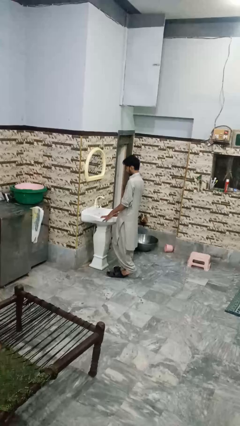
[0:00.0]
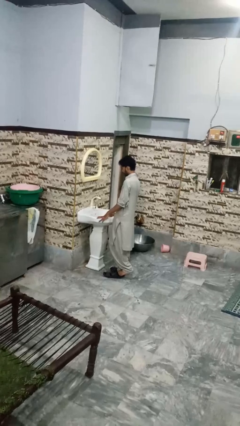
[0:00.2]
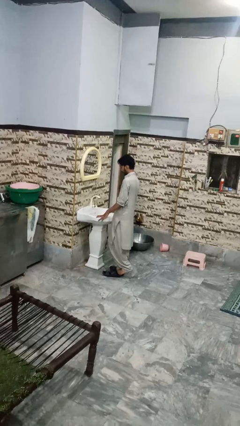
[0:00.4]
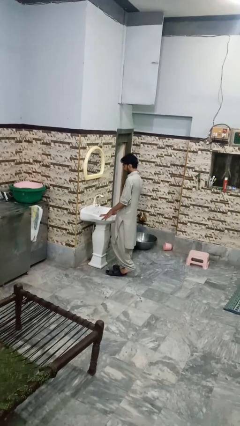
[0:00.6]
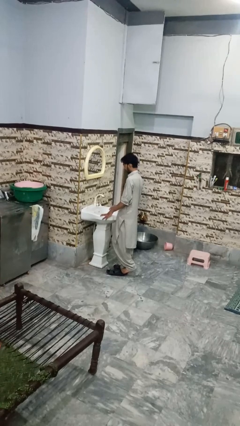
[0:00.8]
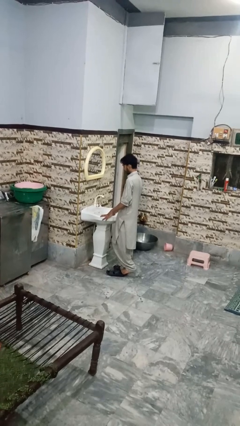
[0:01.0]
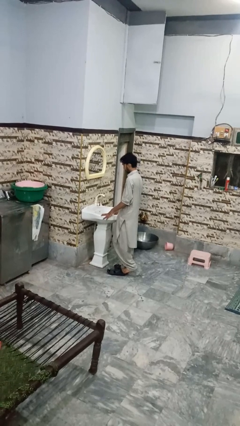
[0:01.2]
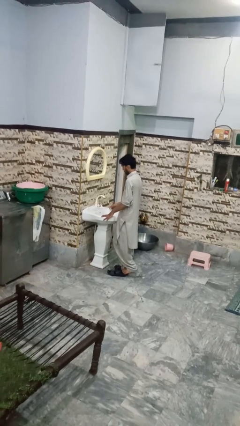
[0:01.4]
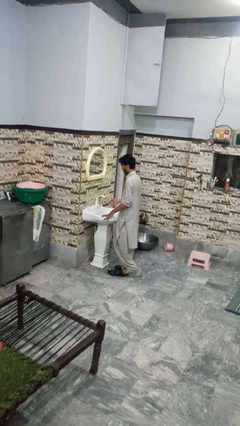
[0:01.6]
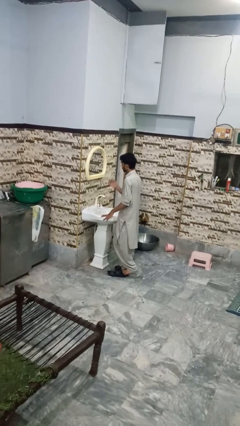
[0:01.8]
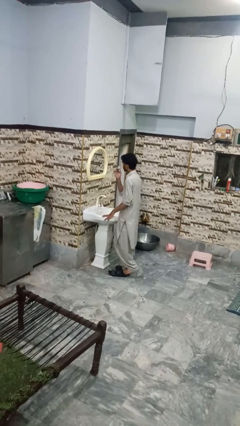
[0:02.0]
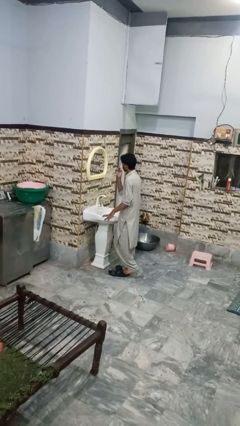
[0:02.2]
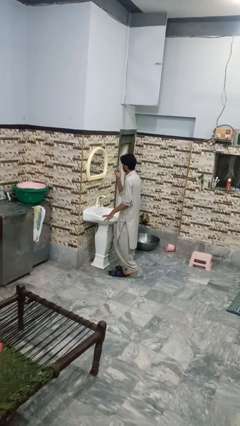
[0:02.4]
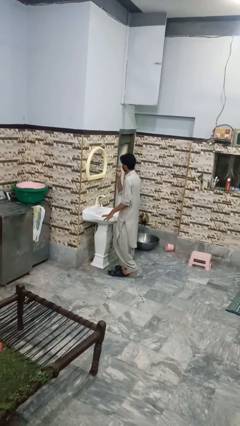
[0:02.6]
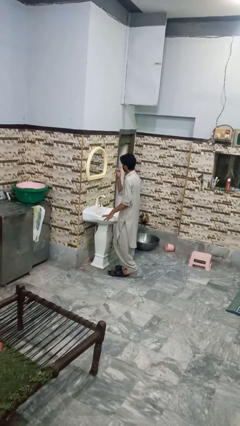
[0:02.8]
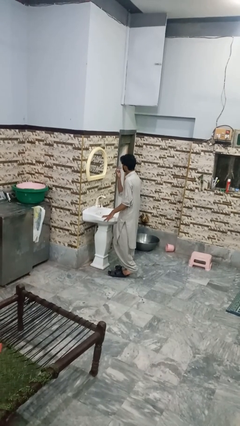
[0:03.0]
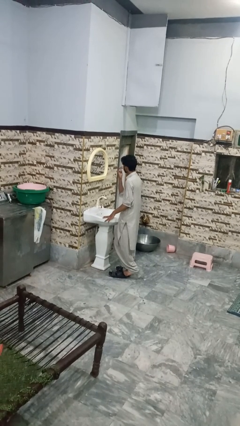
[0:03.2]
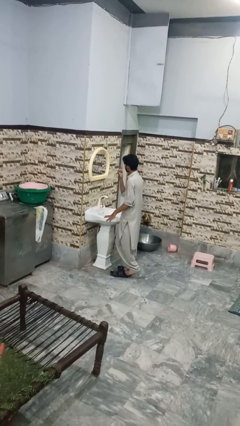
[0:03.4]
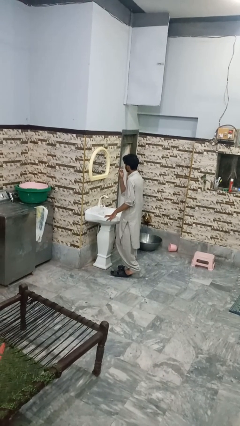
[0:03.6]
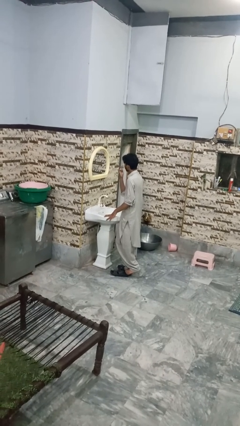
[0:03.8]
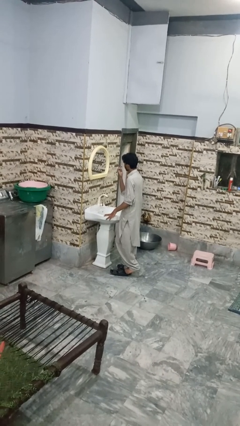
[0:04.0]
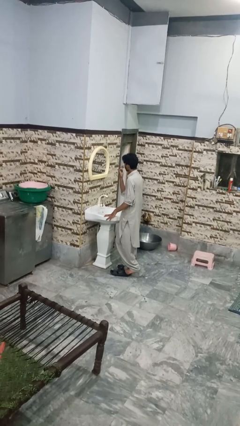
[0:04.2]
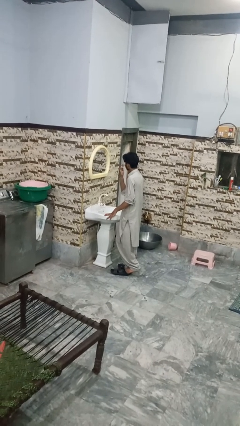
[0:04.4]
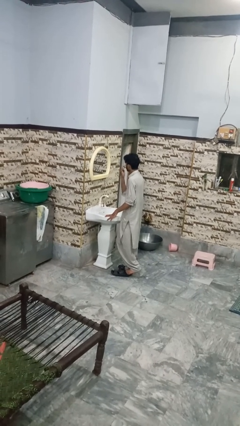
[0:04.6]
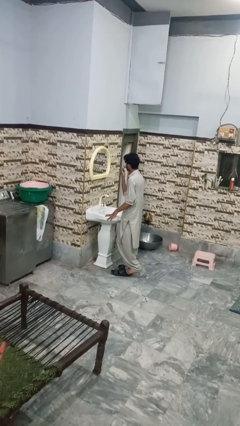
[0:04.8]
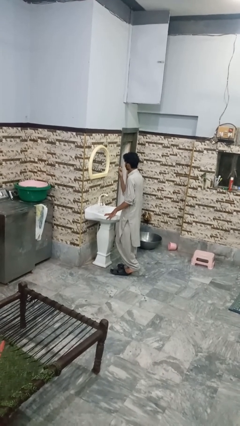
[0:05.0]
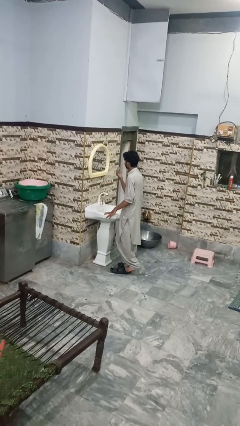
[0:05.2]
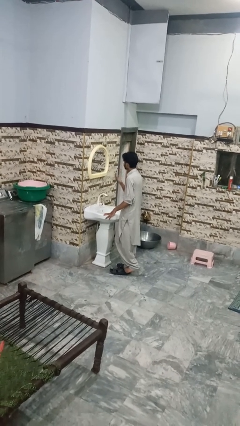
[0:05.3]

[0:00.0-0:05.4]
person applies shaving cream

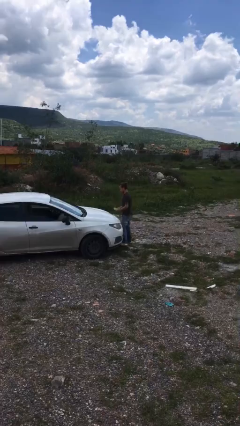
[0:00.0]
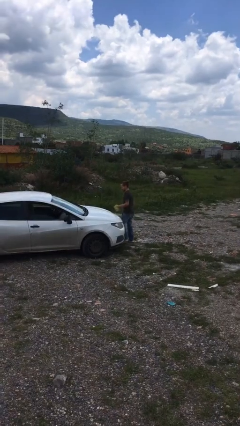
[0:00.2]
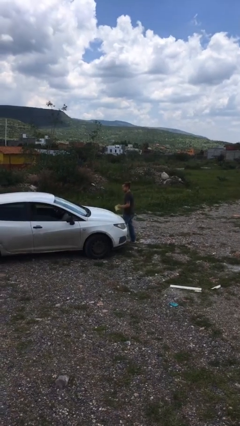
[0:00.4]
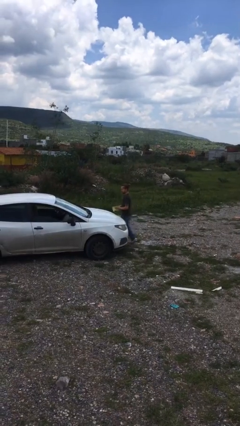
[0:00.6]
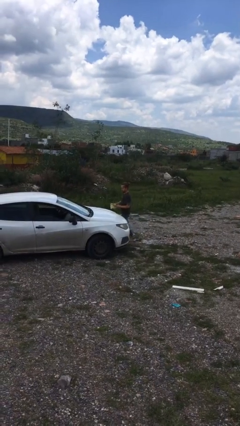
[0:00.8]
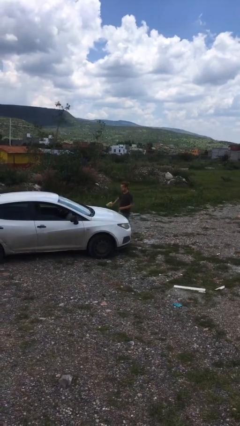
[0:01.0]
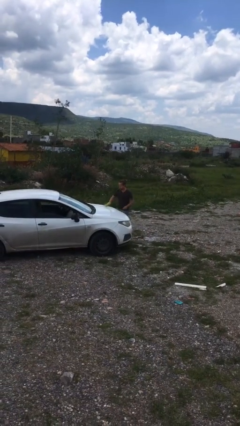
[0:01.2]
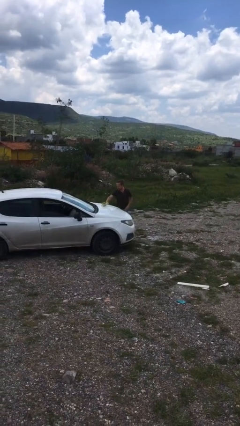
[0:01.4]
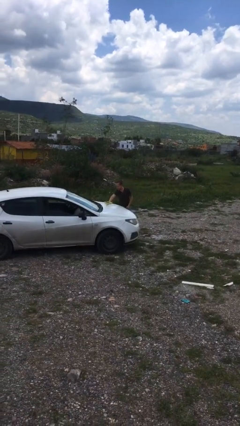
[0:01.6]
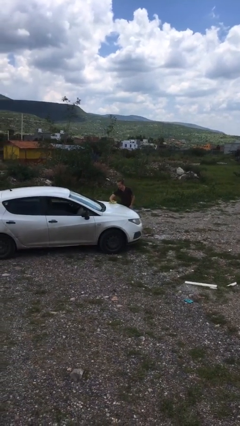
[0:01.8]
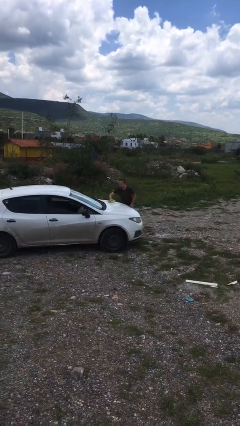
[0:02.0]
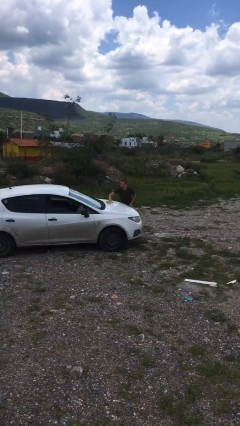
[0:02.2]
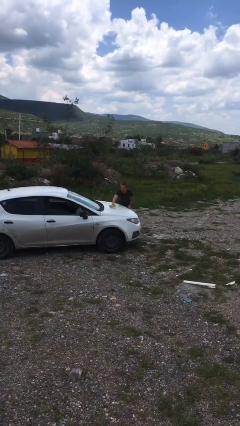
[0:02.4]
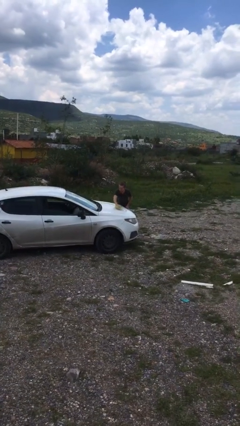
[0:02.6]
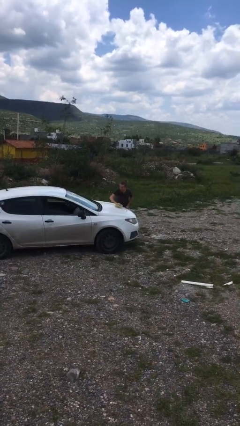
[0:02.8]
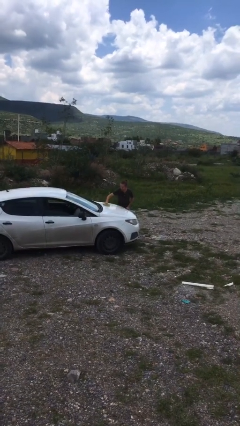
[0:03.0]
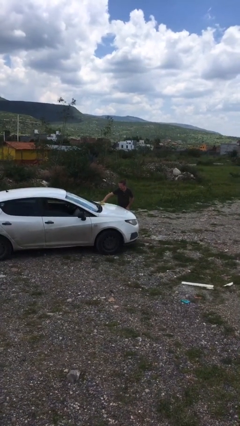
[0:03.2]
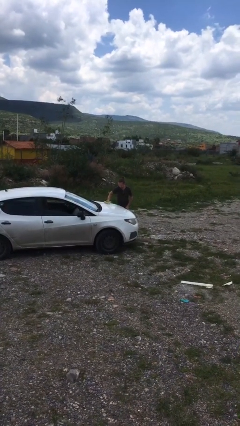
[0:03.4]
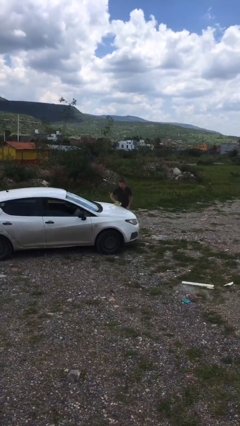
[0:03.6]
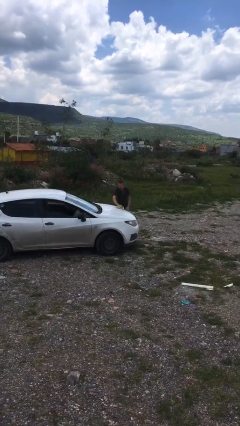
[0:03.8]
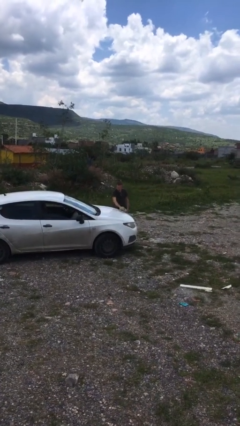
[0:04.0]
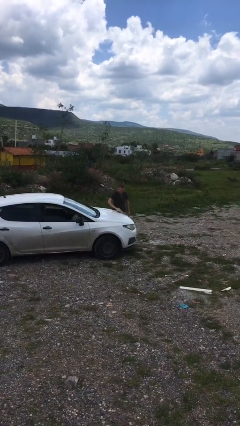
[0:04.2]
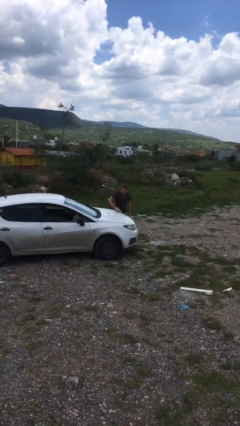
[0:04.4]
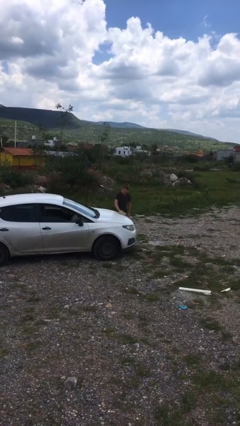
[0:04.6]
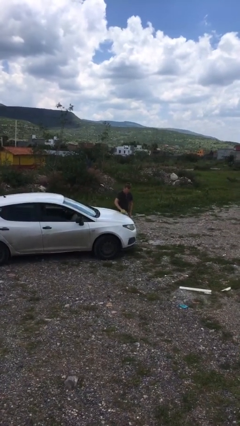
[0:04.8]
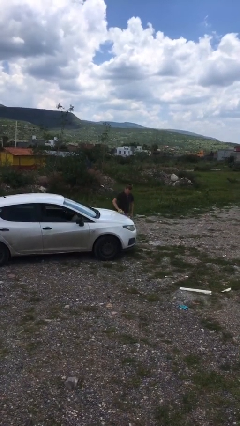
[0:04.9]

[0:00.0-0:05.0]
person polishes car with rag

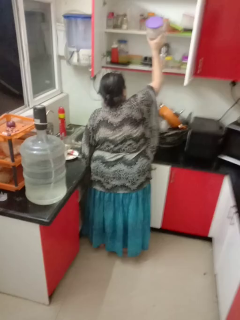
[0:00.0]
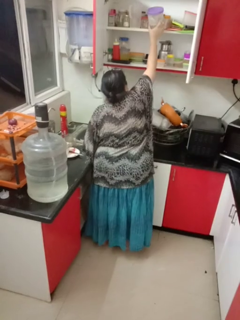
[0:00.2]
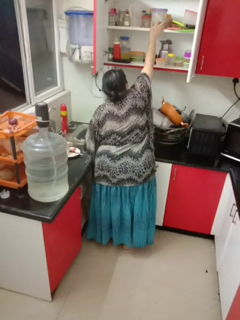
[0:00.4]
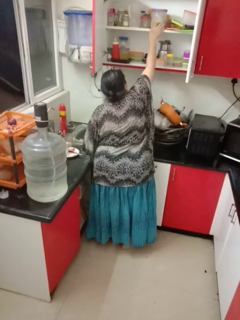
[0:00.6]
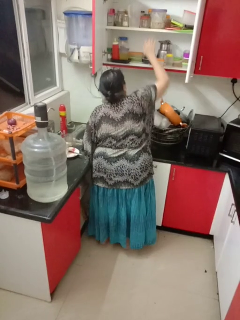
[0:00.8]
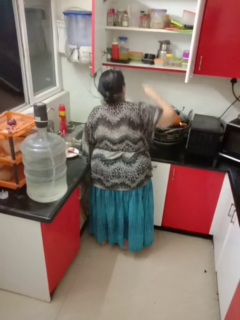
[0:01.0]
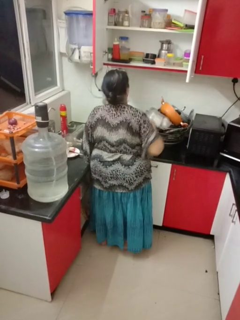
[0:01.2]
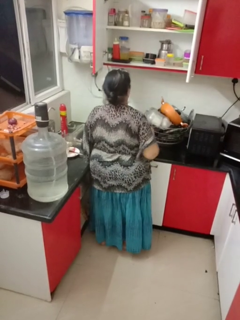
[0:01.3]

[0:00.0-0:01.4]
person puts object in cabinet

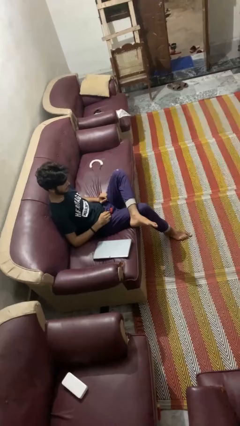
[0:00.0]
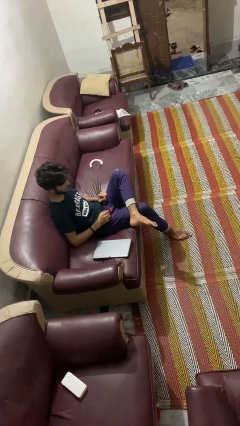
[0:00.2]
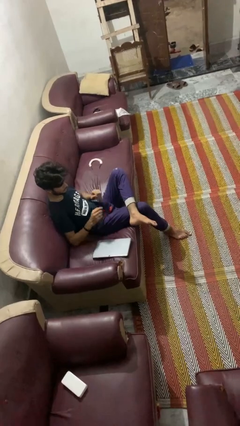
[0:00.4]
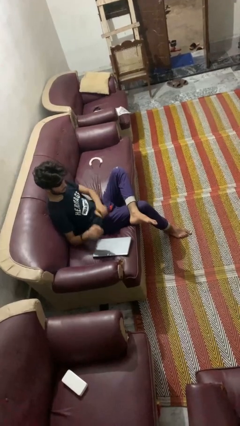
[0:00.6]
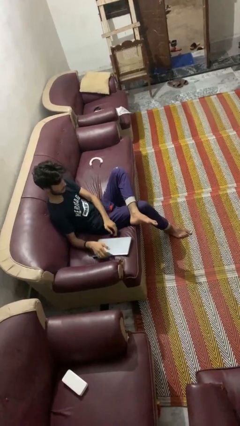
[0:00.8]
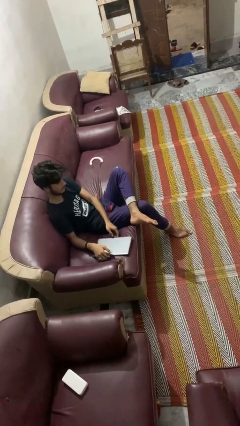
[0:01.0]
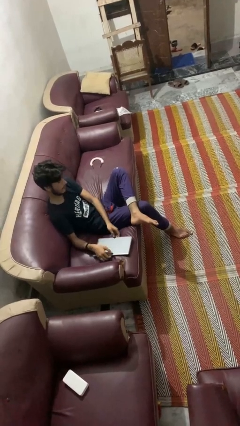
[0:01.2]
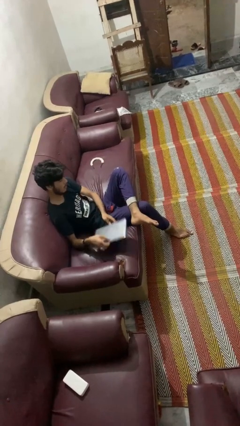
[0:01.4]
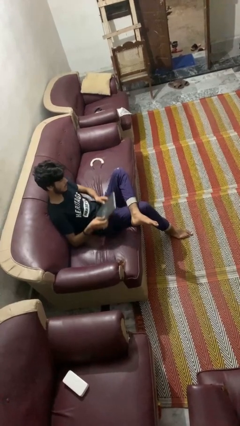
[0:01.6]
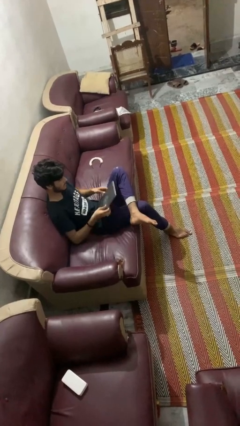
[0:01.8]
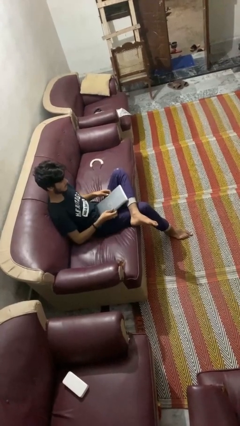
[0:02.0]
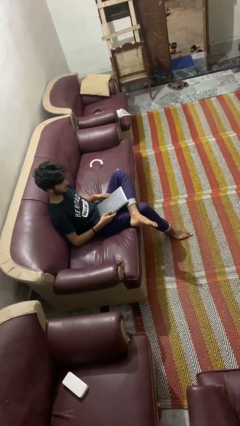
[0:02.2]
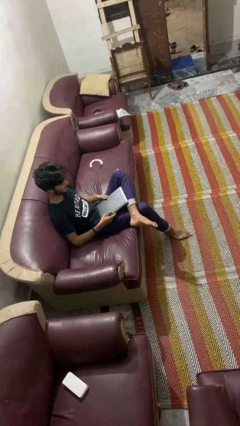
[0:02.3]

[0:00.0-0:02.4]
person picks up object from couch

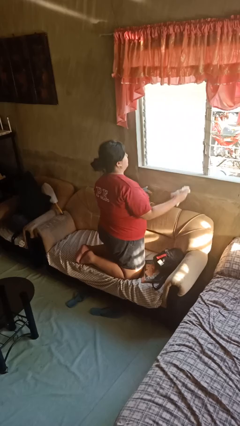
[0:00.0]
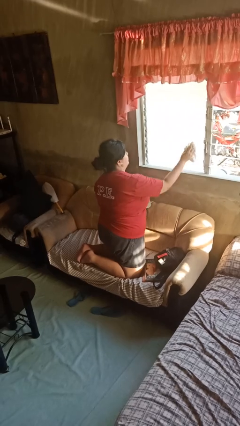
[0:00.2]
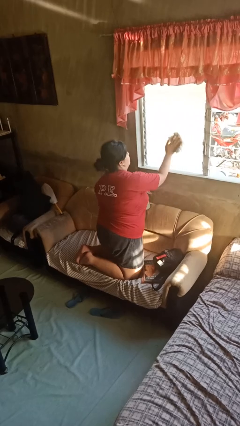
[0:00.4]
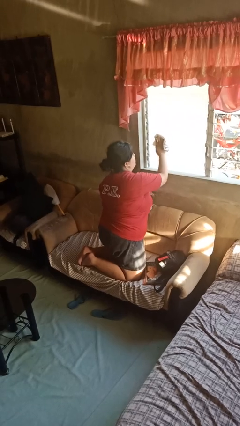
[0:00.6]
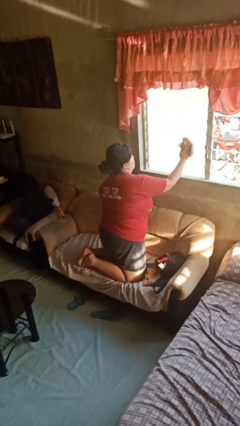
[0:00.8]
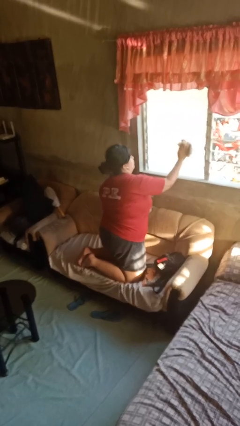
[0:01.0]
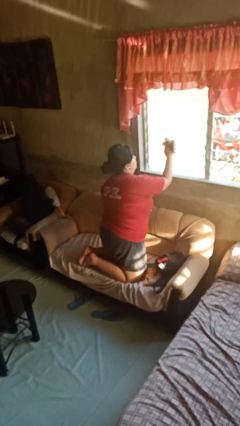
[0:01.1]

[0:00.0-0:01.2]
person washes window

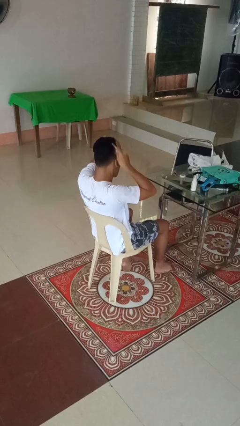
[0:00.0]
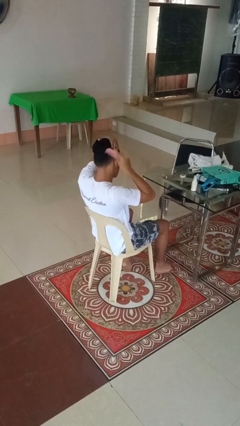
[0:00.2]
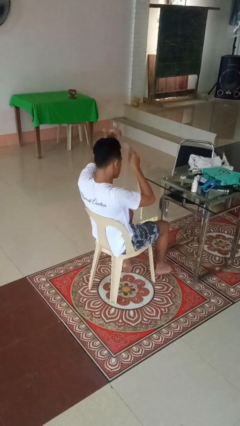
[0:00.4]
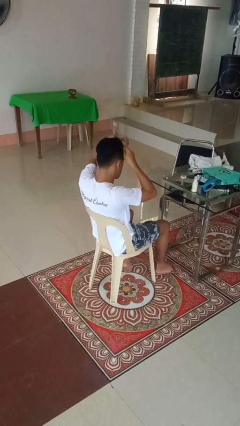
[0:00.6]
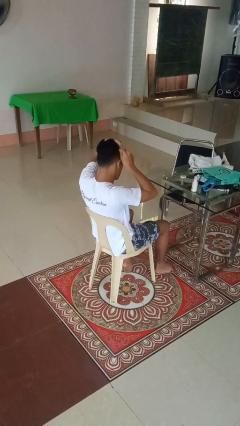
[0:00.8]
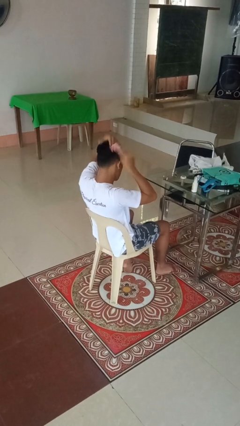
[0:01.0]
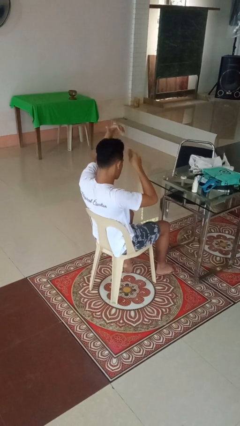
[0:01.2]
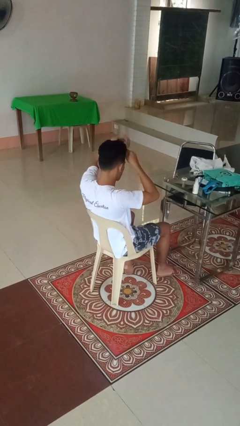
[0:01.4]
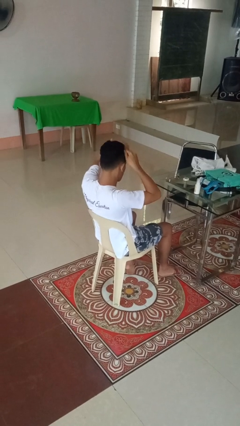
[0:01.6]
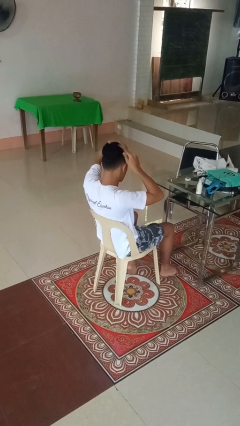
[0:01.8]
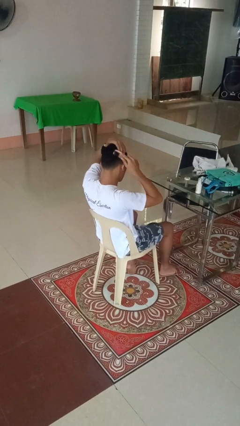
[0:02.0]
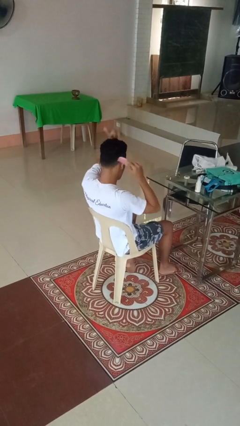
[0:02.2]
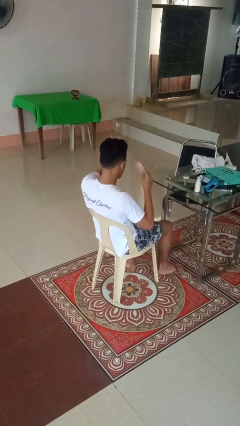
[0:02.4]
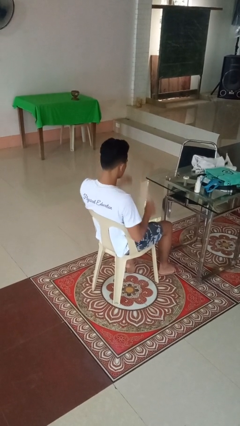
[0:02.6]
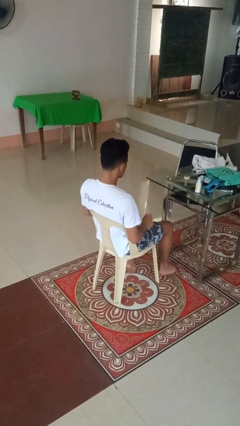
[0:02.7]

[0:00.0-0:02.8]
person brushes hair
